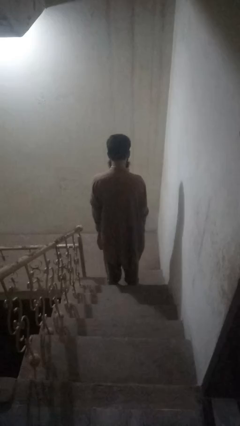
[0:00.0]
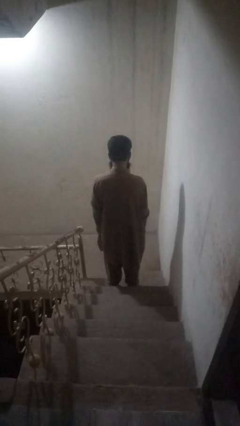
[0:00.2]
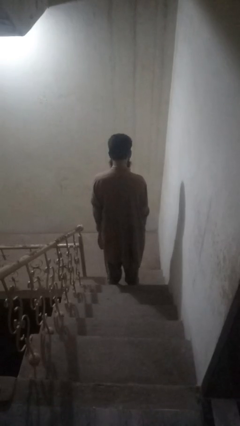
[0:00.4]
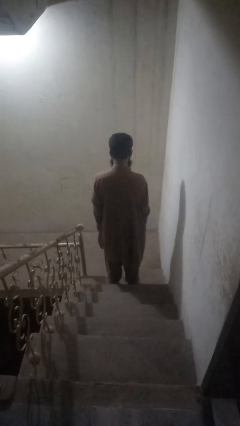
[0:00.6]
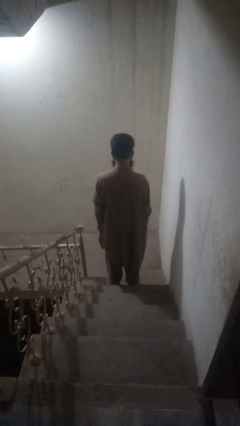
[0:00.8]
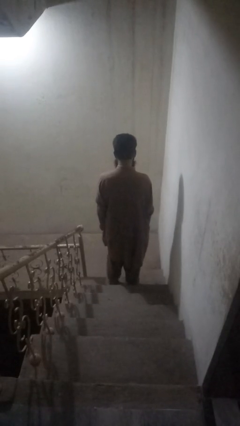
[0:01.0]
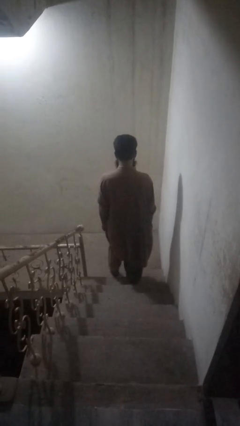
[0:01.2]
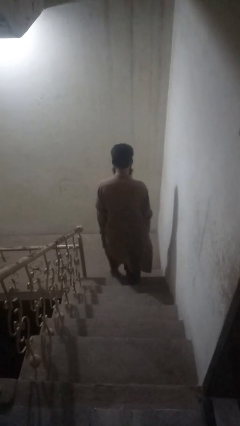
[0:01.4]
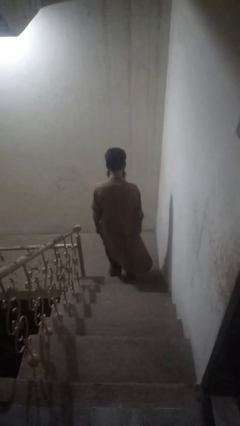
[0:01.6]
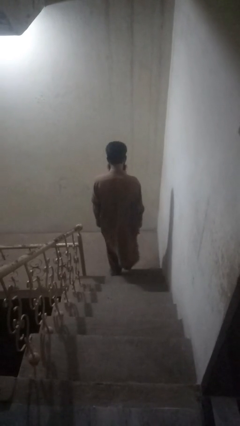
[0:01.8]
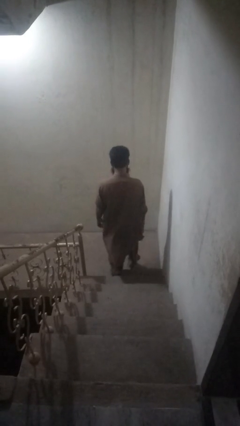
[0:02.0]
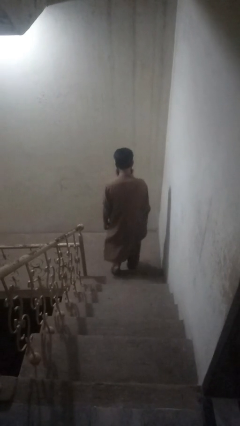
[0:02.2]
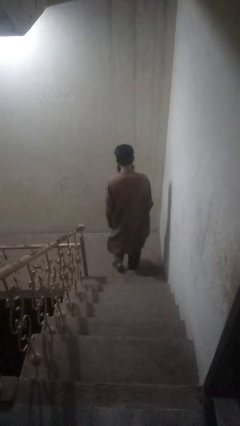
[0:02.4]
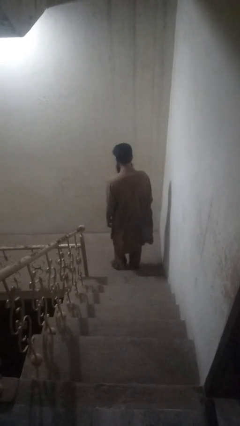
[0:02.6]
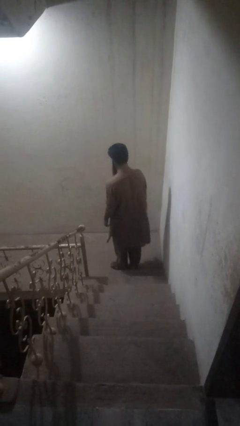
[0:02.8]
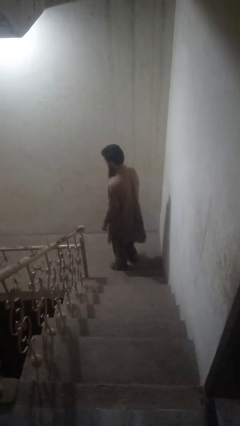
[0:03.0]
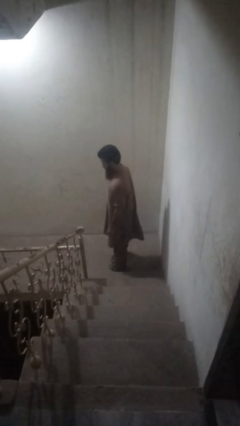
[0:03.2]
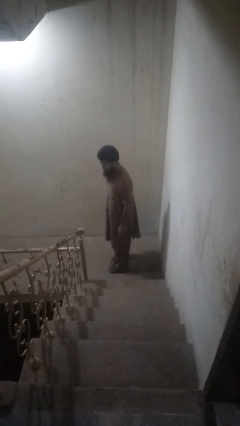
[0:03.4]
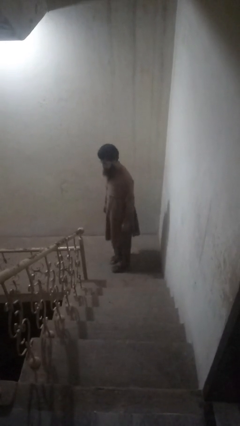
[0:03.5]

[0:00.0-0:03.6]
person climbs down stairs

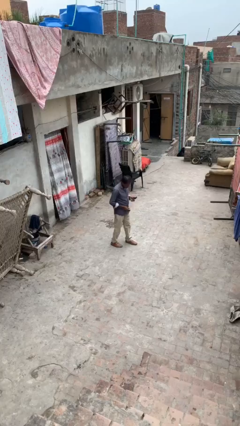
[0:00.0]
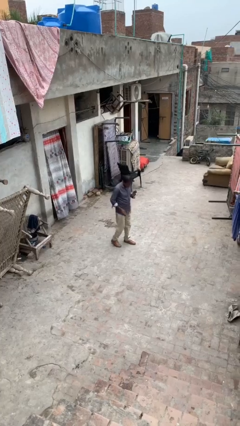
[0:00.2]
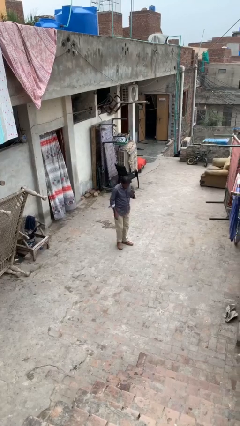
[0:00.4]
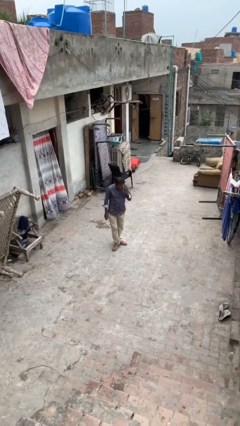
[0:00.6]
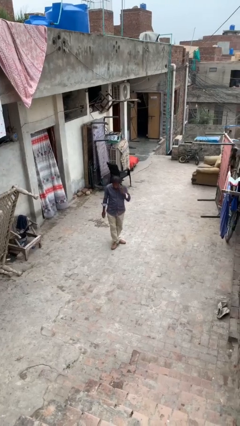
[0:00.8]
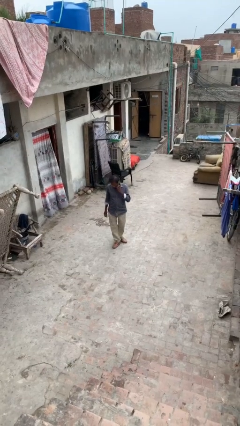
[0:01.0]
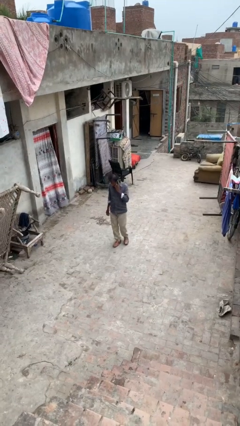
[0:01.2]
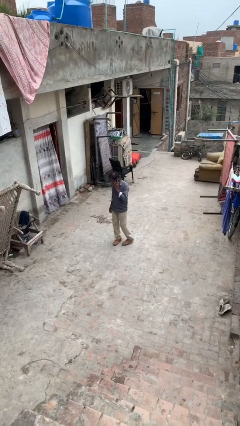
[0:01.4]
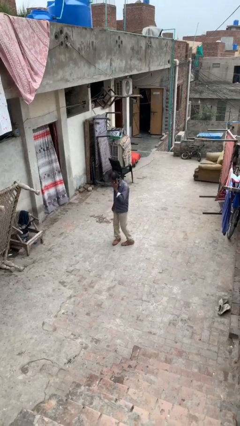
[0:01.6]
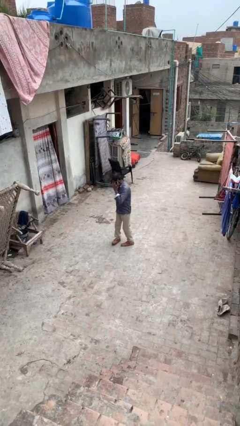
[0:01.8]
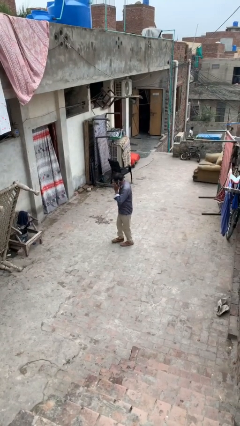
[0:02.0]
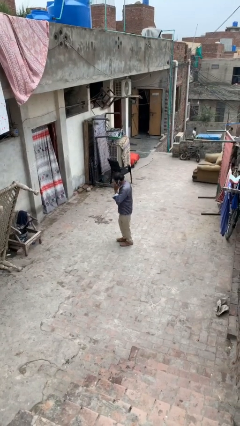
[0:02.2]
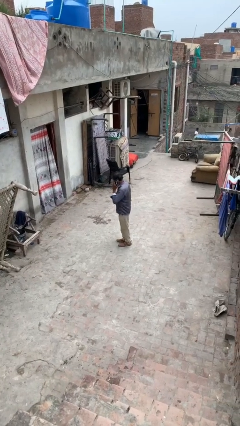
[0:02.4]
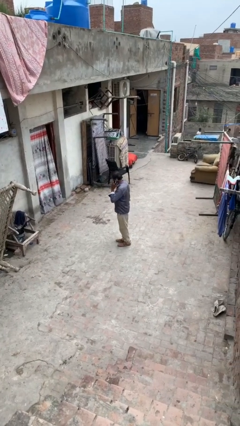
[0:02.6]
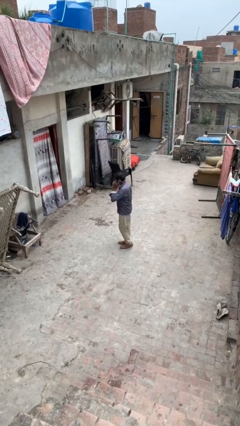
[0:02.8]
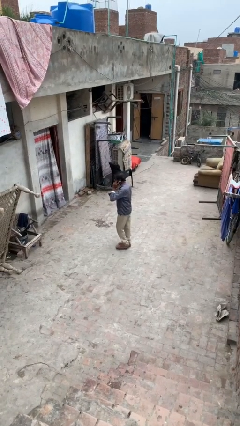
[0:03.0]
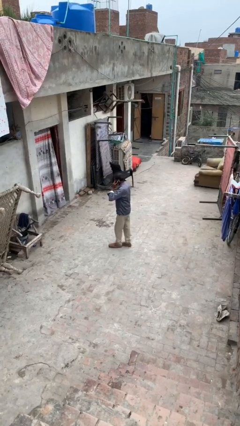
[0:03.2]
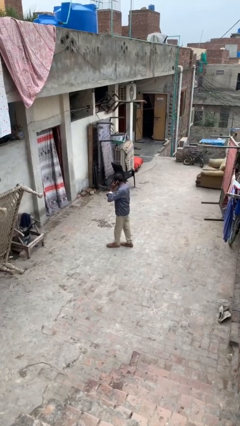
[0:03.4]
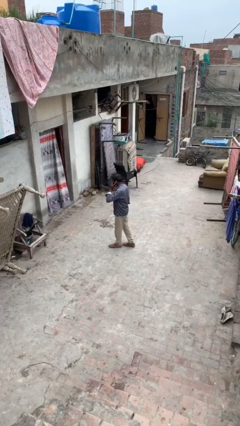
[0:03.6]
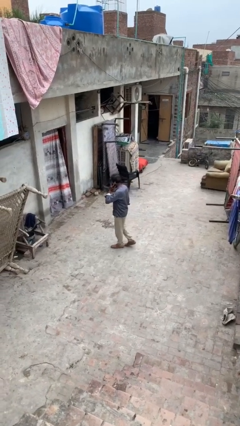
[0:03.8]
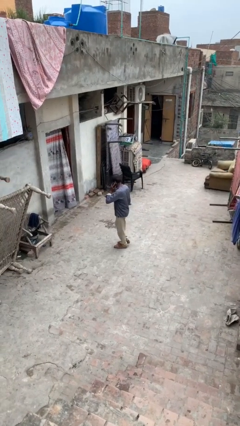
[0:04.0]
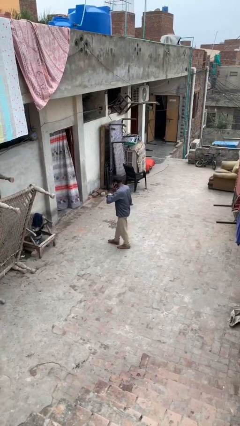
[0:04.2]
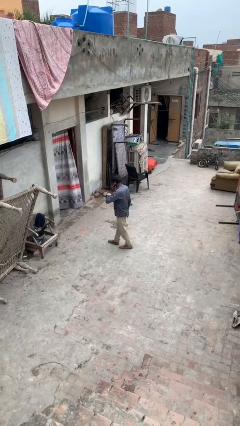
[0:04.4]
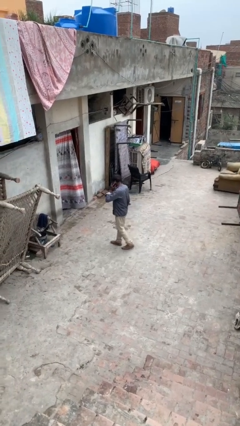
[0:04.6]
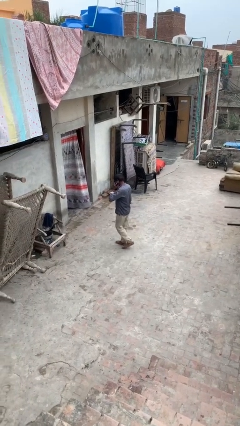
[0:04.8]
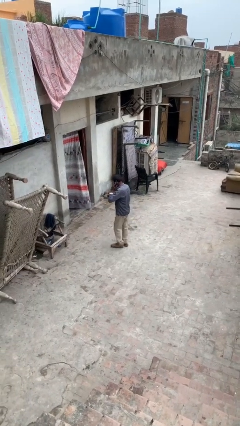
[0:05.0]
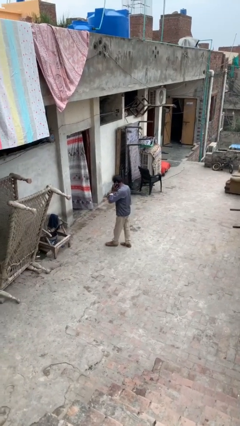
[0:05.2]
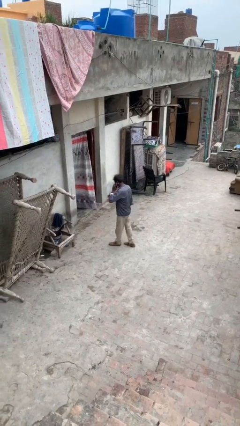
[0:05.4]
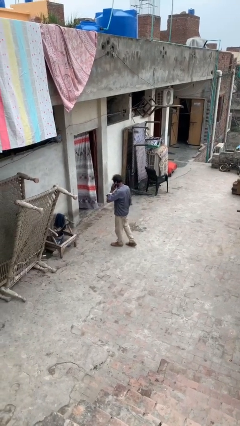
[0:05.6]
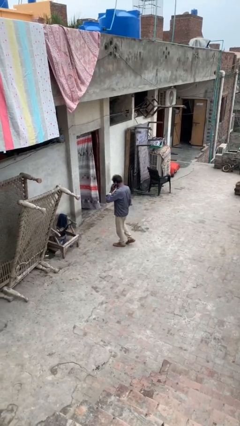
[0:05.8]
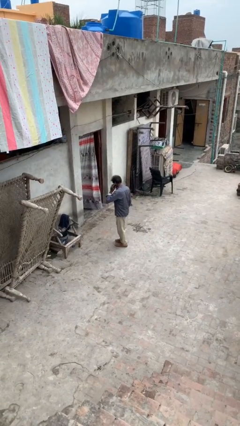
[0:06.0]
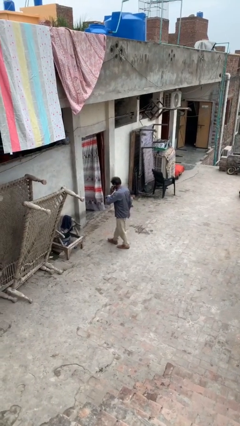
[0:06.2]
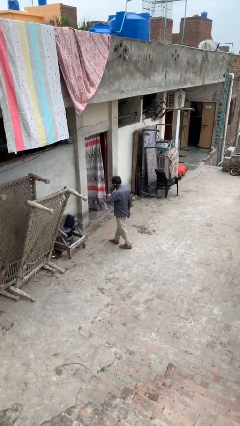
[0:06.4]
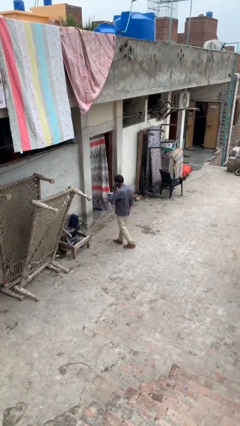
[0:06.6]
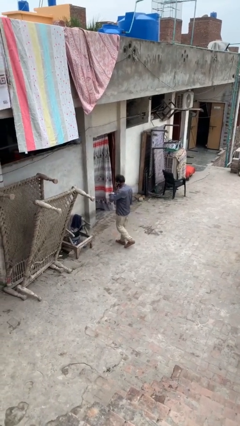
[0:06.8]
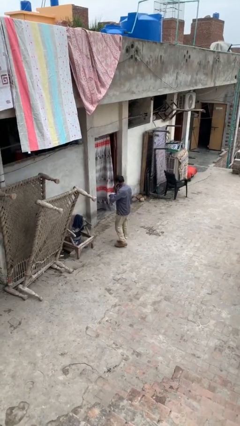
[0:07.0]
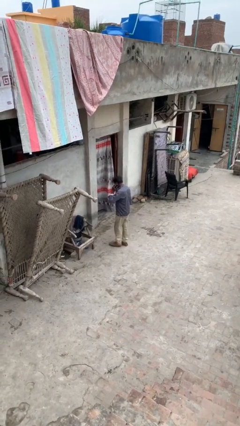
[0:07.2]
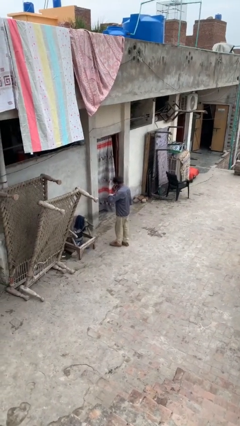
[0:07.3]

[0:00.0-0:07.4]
person talks on phone

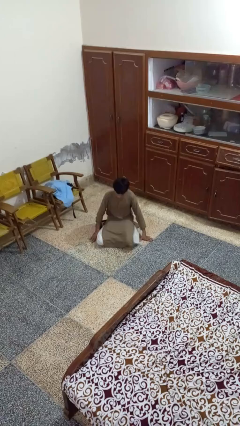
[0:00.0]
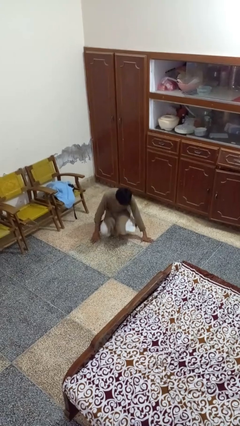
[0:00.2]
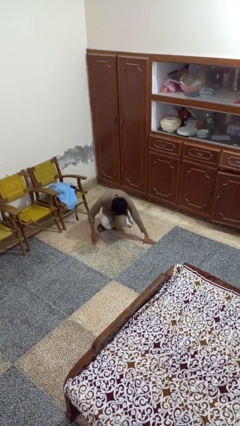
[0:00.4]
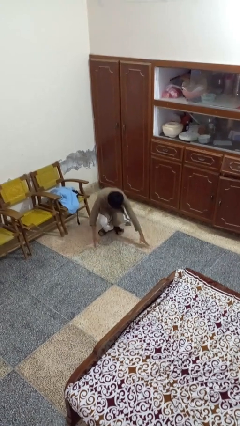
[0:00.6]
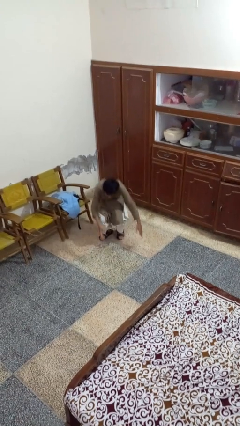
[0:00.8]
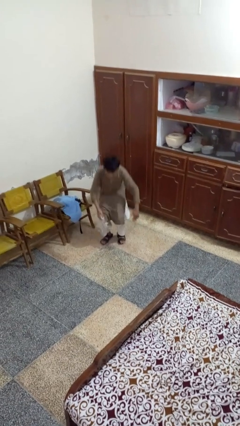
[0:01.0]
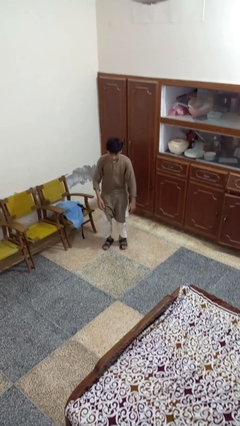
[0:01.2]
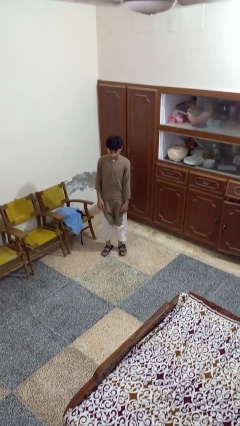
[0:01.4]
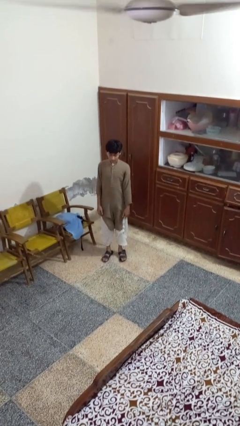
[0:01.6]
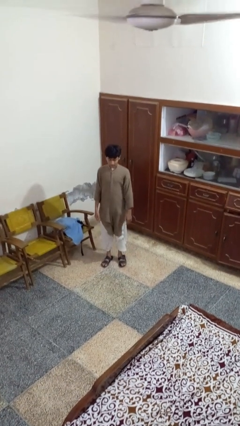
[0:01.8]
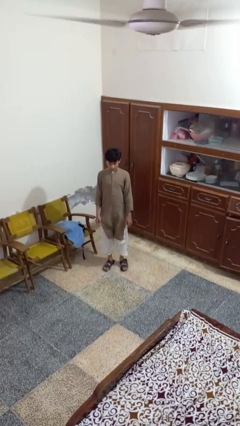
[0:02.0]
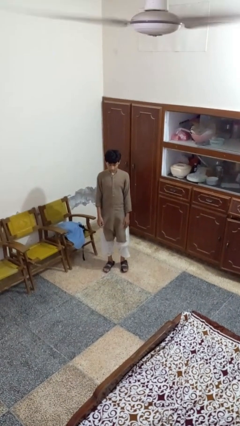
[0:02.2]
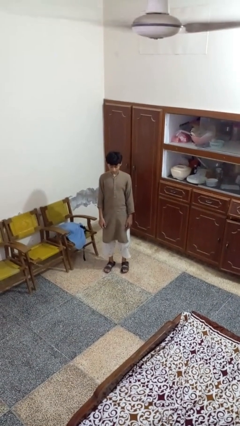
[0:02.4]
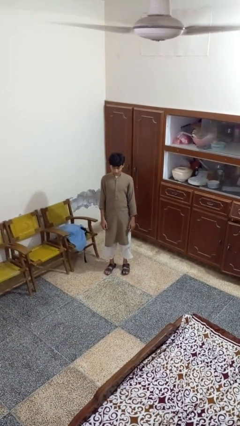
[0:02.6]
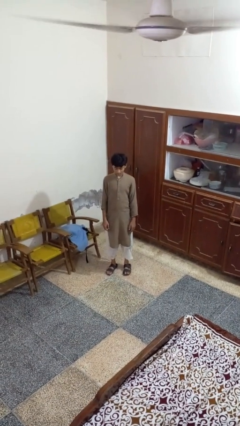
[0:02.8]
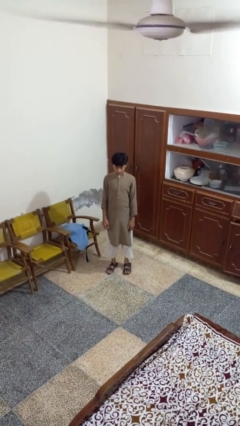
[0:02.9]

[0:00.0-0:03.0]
person stands up from floor

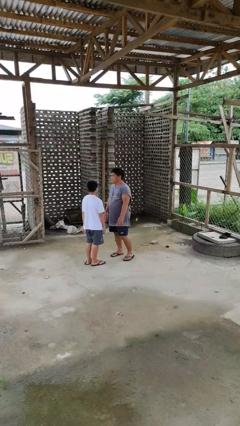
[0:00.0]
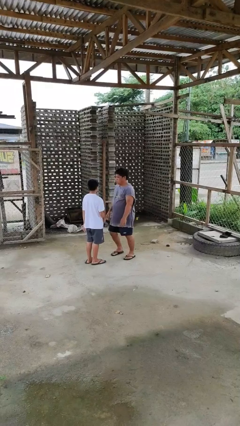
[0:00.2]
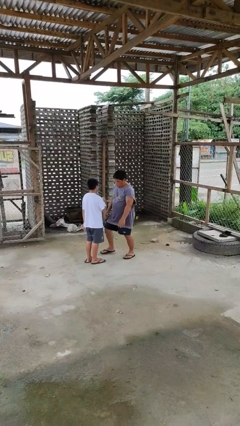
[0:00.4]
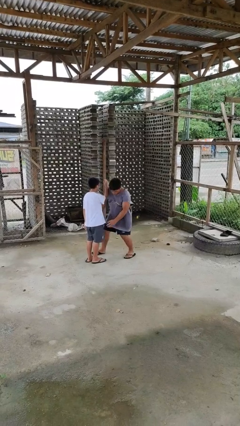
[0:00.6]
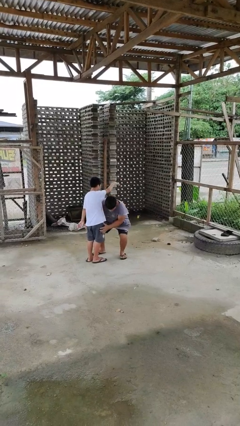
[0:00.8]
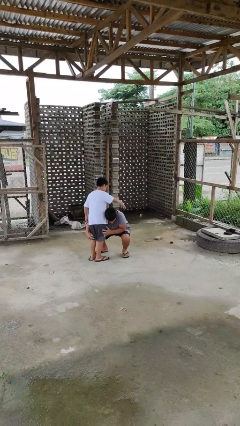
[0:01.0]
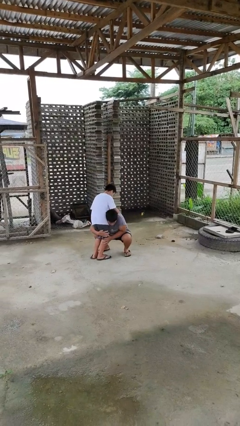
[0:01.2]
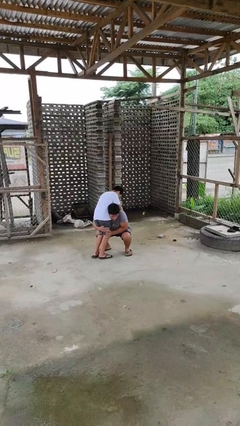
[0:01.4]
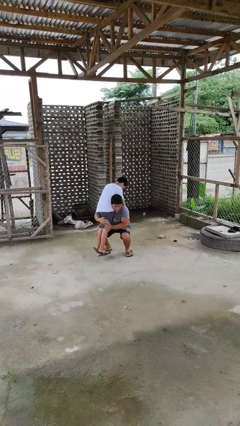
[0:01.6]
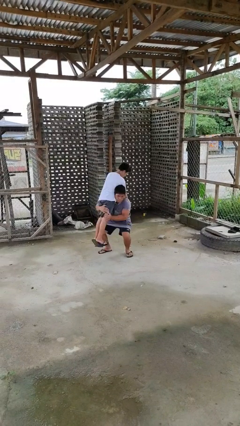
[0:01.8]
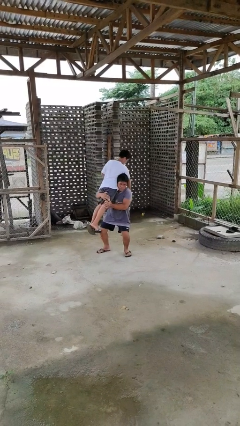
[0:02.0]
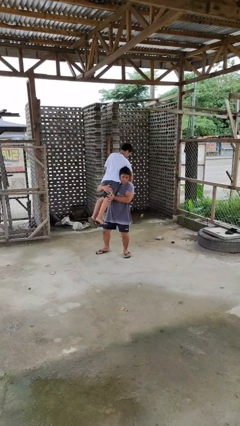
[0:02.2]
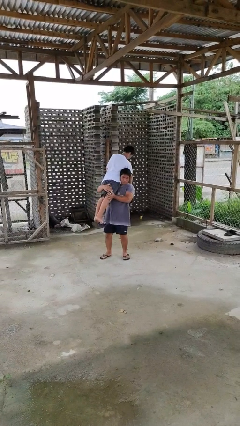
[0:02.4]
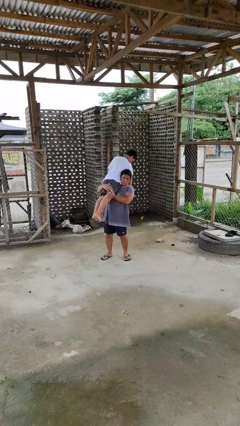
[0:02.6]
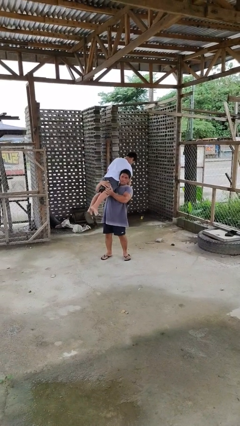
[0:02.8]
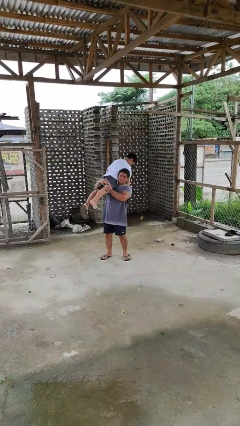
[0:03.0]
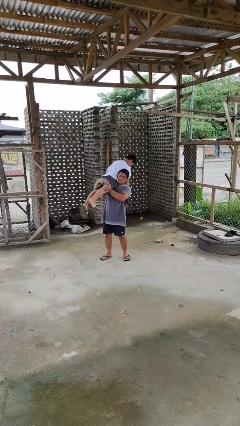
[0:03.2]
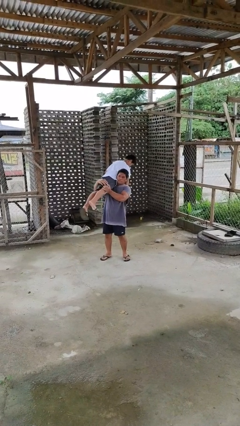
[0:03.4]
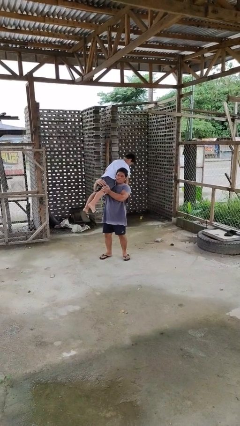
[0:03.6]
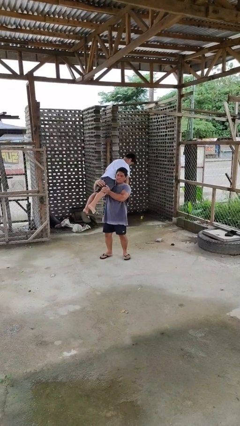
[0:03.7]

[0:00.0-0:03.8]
person carries person over shoulder
